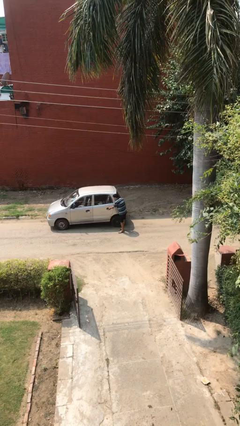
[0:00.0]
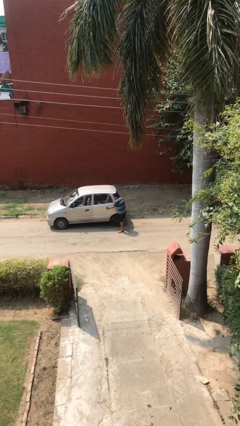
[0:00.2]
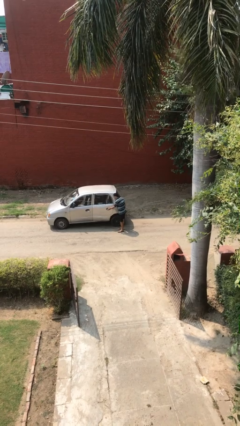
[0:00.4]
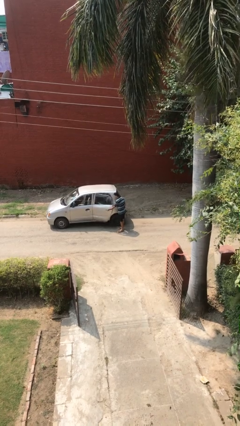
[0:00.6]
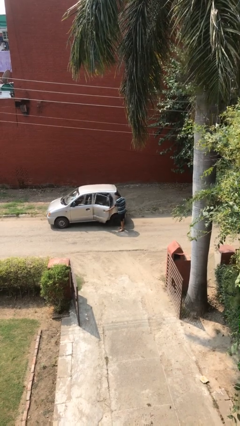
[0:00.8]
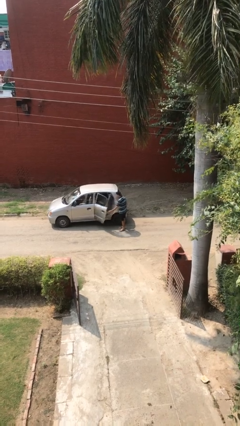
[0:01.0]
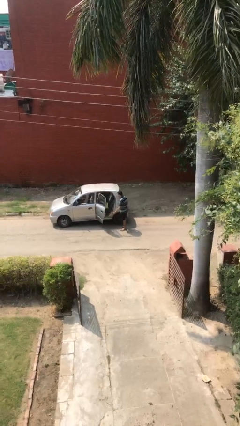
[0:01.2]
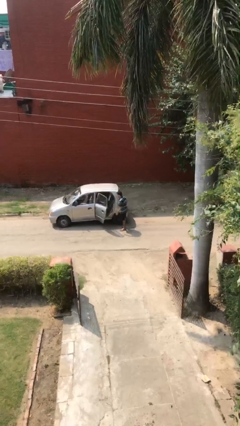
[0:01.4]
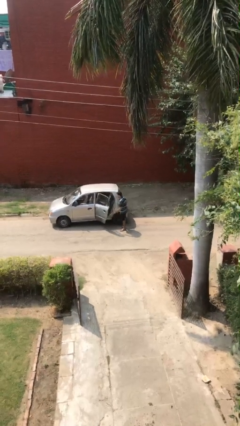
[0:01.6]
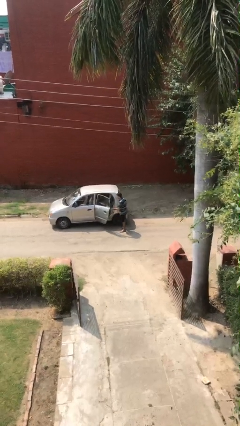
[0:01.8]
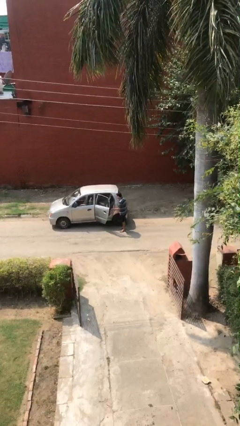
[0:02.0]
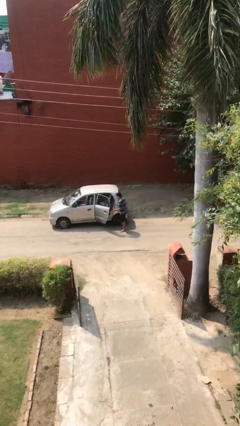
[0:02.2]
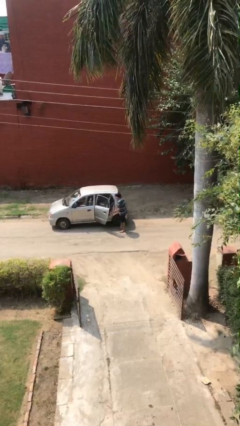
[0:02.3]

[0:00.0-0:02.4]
person opens car door

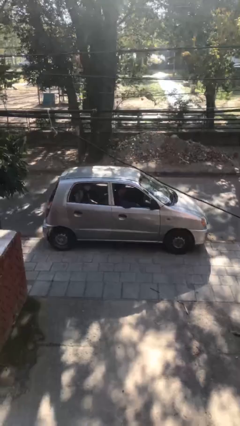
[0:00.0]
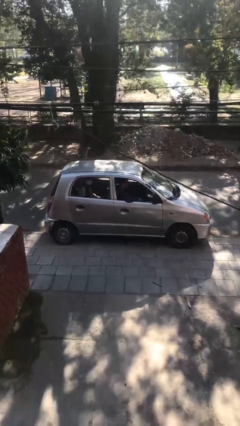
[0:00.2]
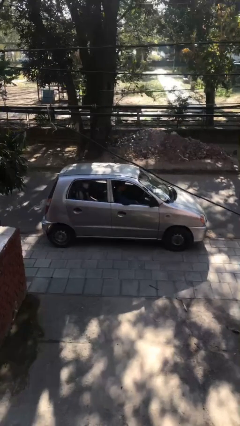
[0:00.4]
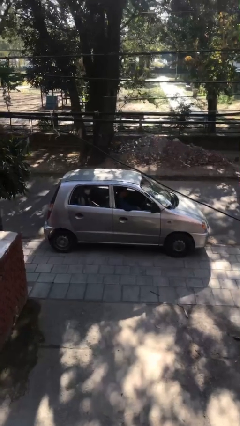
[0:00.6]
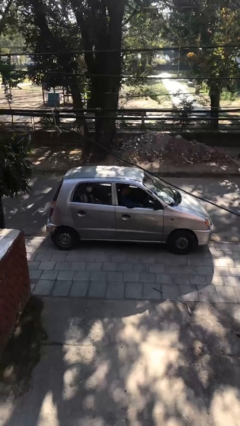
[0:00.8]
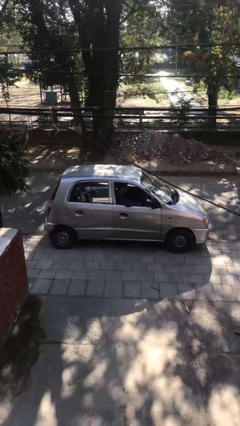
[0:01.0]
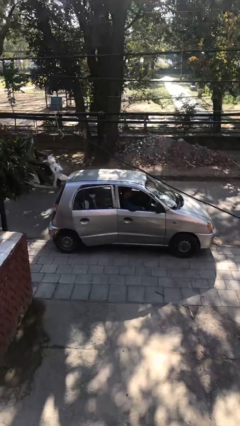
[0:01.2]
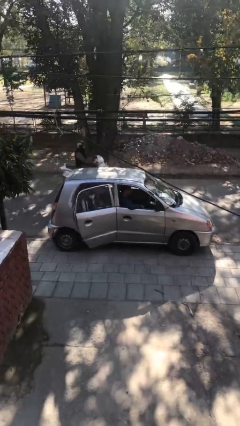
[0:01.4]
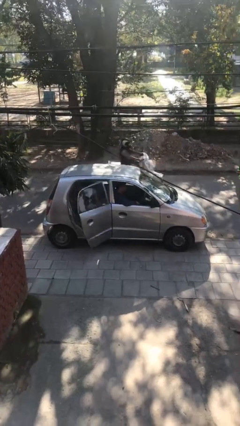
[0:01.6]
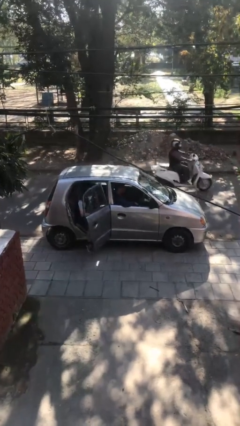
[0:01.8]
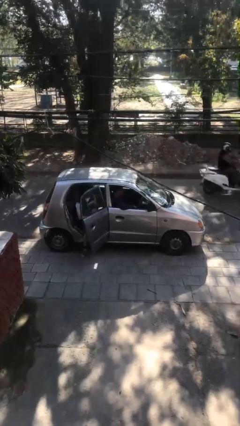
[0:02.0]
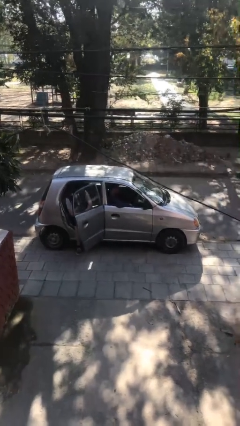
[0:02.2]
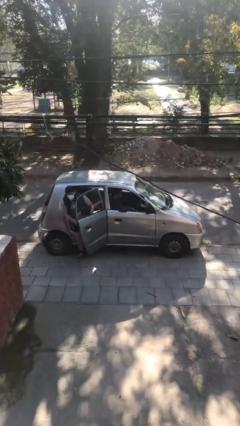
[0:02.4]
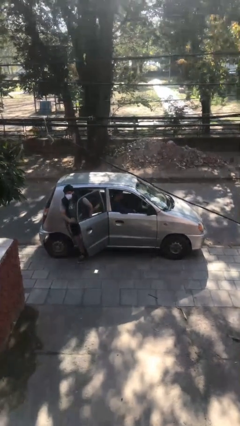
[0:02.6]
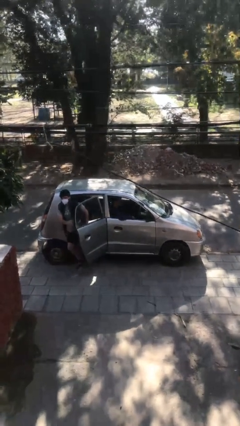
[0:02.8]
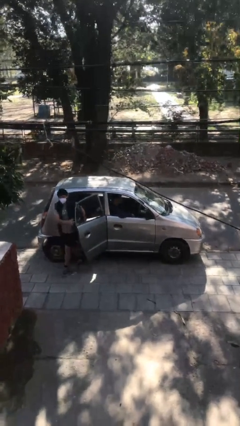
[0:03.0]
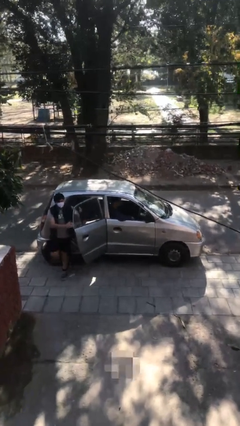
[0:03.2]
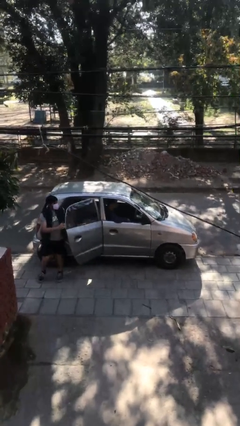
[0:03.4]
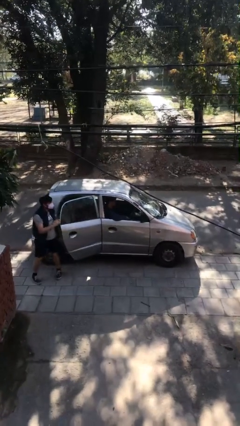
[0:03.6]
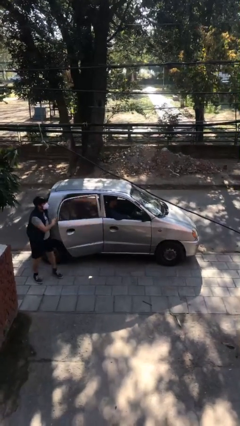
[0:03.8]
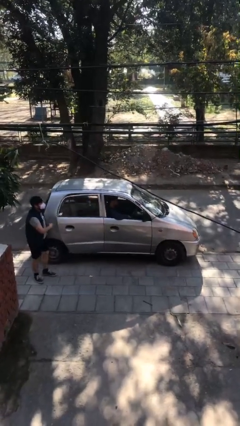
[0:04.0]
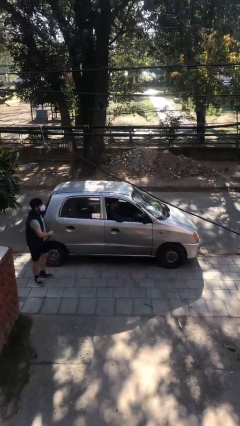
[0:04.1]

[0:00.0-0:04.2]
car drops off person

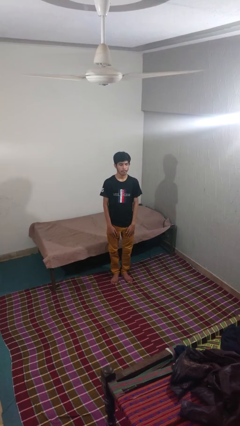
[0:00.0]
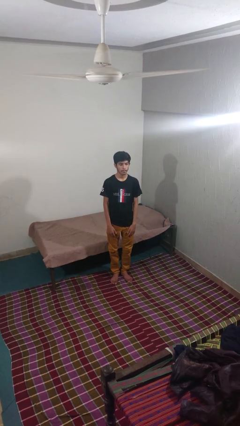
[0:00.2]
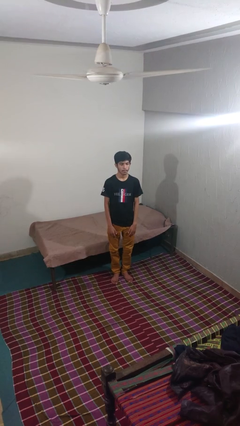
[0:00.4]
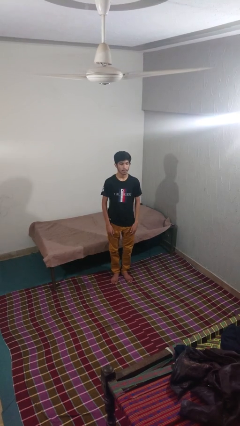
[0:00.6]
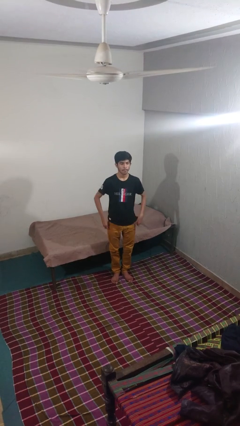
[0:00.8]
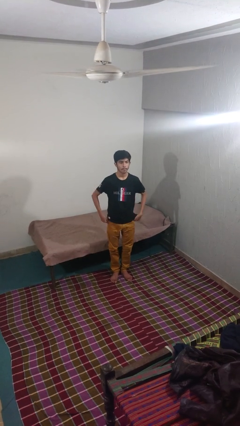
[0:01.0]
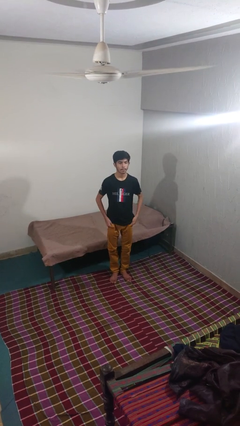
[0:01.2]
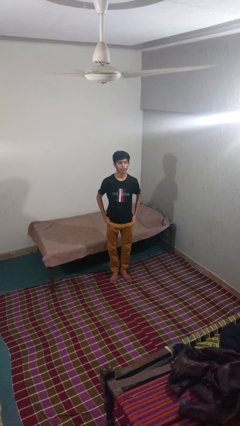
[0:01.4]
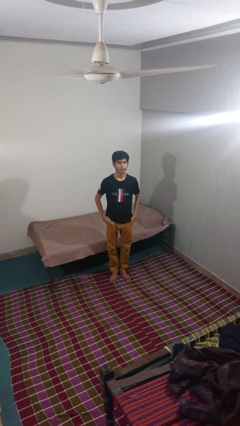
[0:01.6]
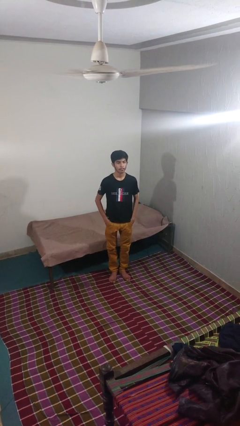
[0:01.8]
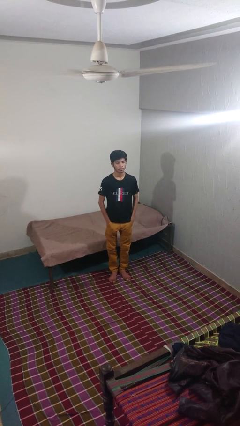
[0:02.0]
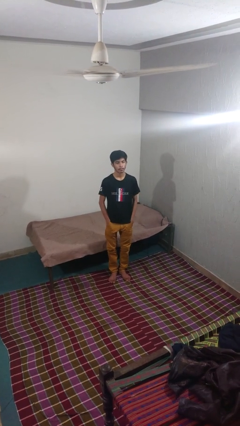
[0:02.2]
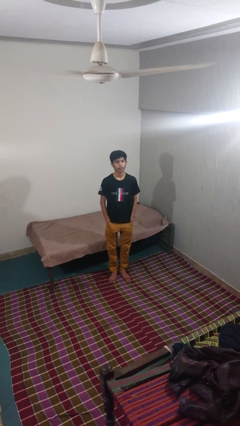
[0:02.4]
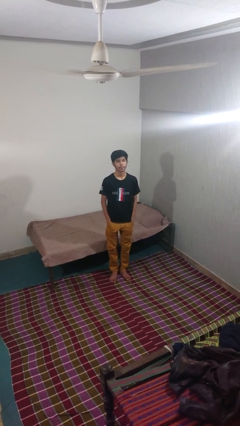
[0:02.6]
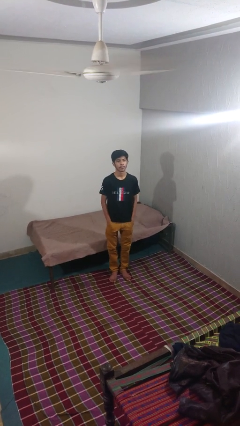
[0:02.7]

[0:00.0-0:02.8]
person puts hands in back pockets

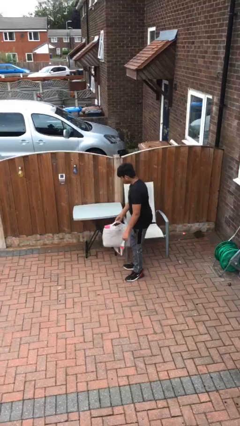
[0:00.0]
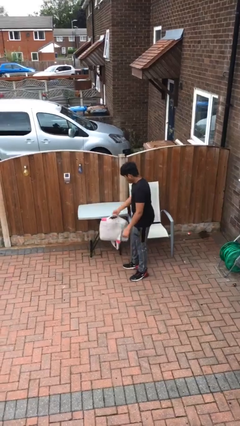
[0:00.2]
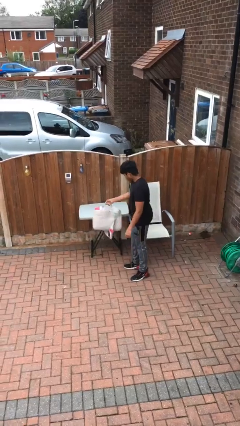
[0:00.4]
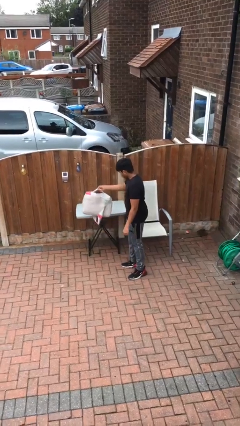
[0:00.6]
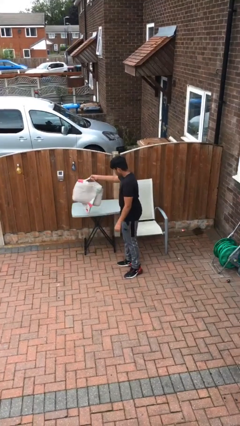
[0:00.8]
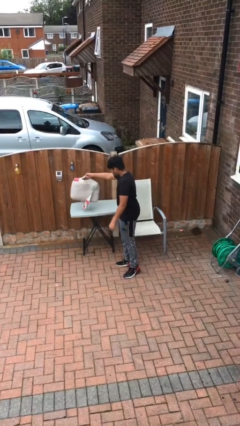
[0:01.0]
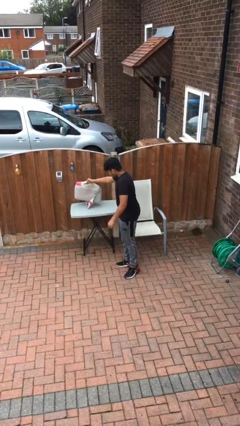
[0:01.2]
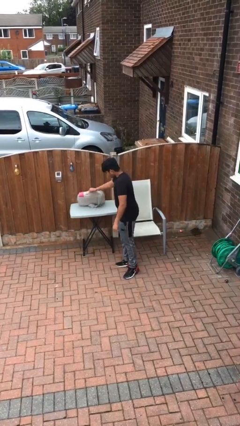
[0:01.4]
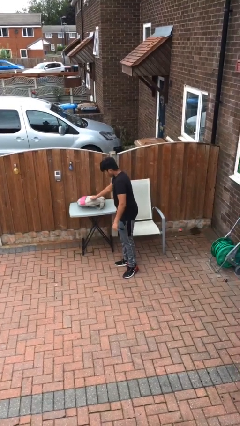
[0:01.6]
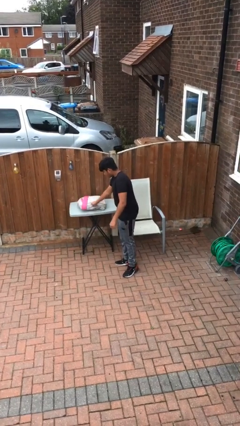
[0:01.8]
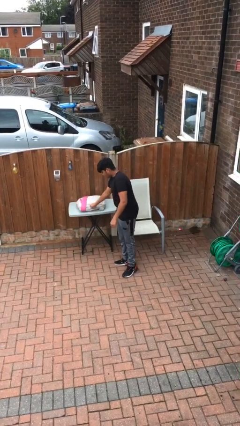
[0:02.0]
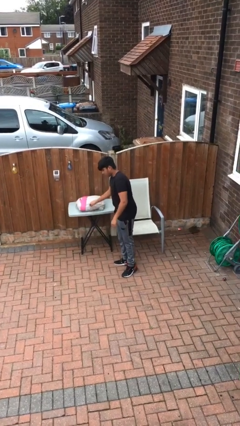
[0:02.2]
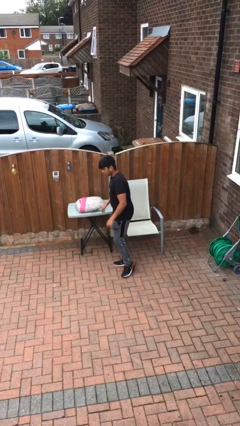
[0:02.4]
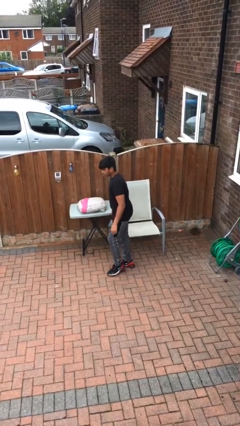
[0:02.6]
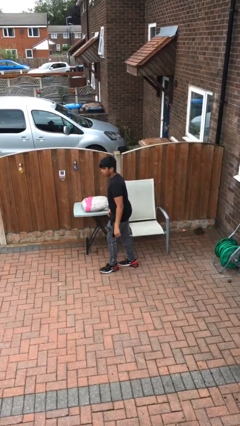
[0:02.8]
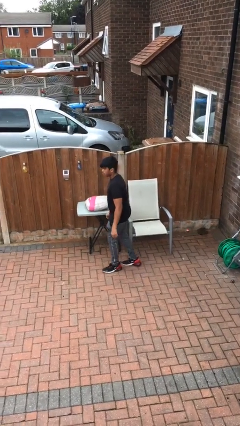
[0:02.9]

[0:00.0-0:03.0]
person puts down object on table

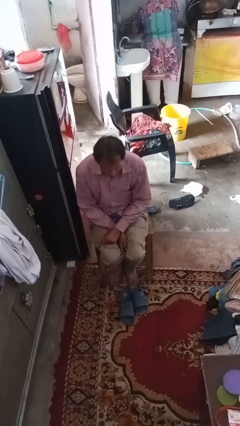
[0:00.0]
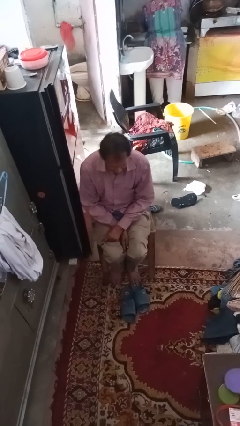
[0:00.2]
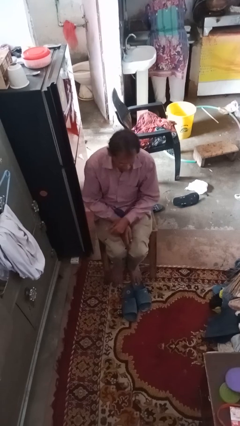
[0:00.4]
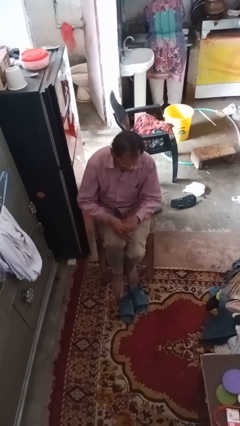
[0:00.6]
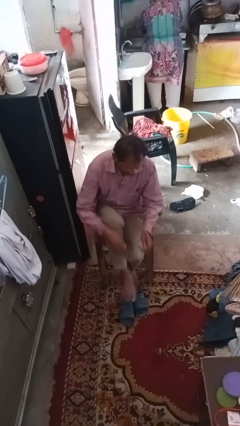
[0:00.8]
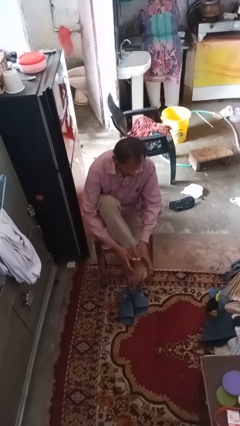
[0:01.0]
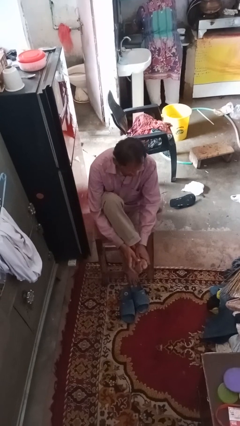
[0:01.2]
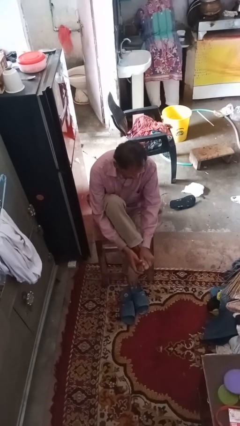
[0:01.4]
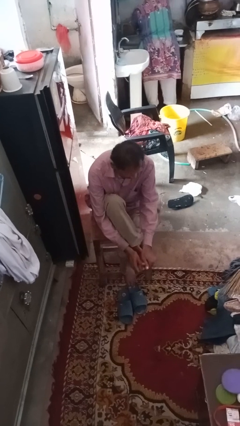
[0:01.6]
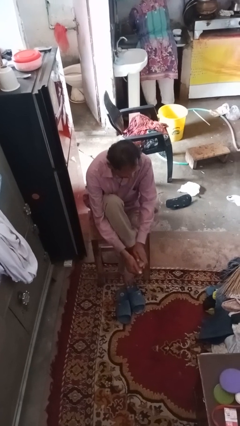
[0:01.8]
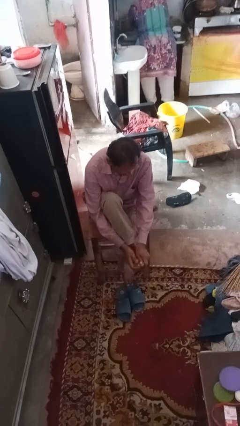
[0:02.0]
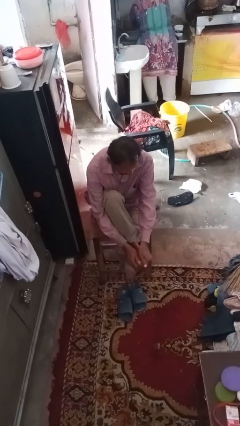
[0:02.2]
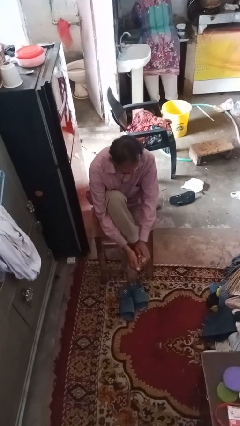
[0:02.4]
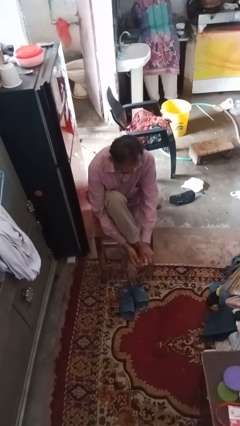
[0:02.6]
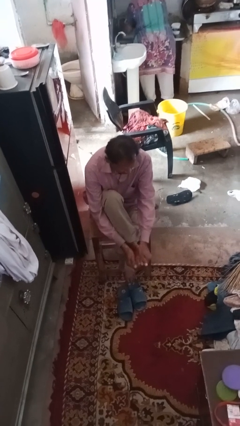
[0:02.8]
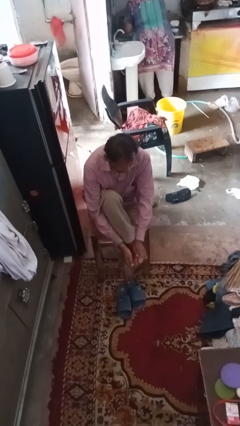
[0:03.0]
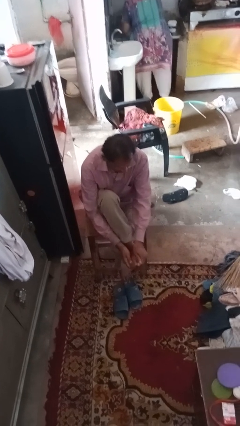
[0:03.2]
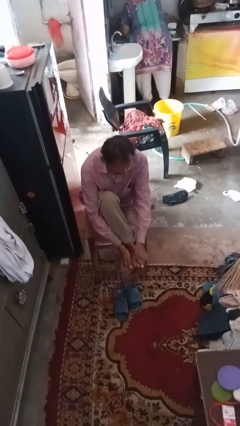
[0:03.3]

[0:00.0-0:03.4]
person rubs foot

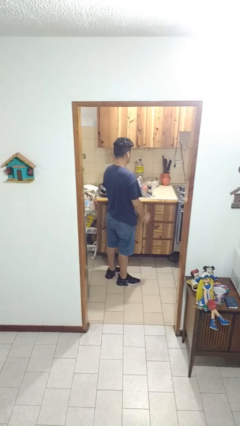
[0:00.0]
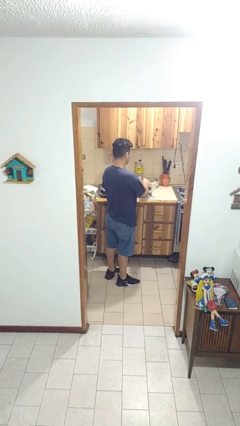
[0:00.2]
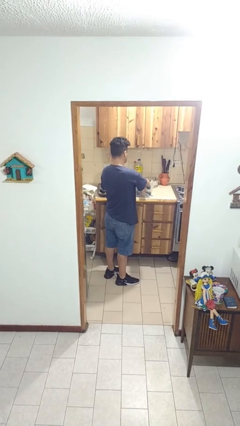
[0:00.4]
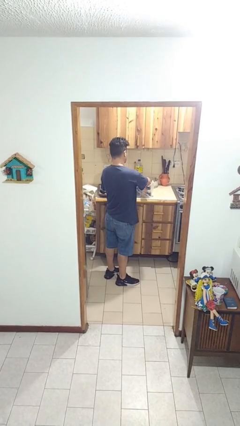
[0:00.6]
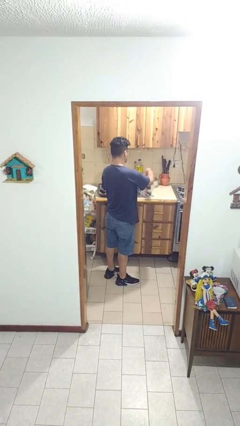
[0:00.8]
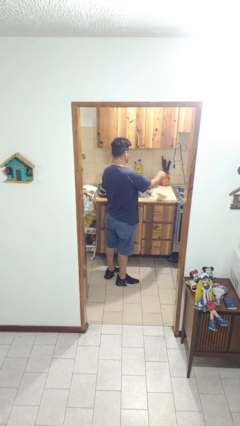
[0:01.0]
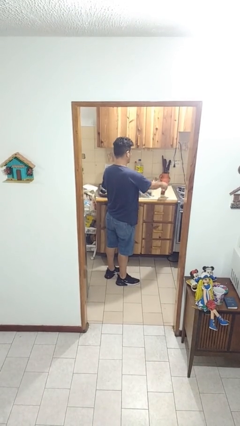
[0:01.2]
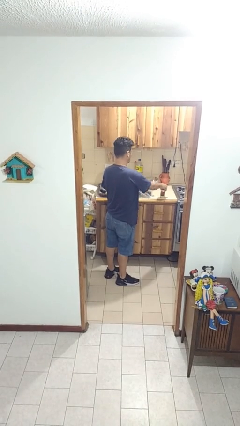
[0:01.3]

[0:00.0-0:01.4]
person takes object from bag

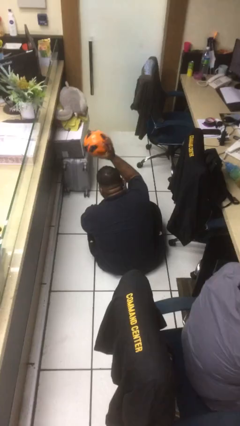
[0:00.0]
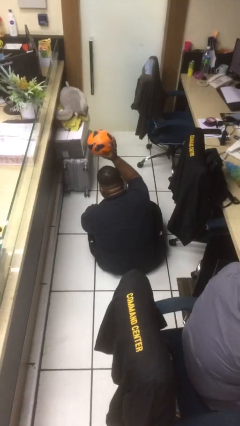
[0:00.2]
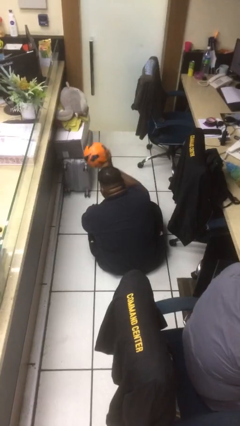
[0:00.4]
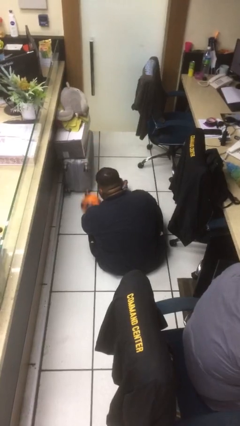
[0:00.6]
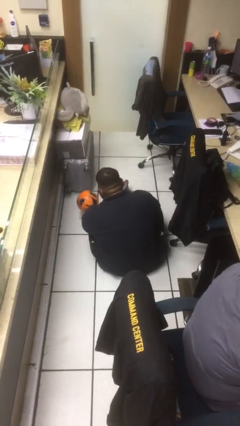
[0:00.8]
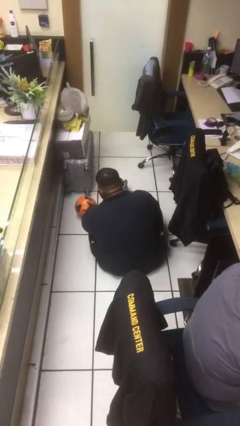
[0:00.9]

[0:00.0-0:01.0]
person bounces ball on floor
